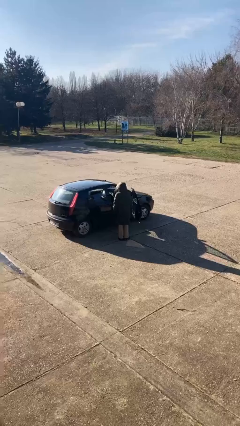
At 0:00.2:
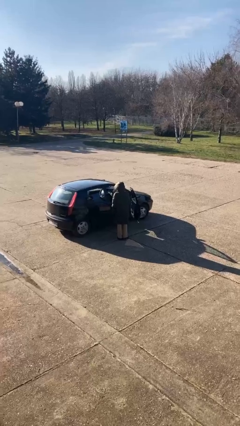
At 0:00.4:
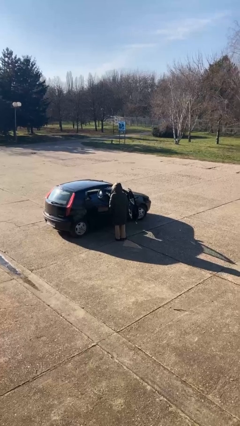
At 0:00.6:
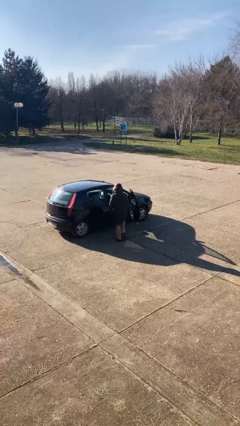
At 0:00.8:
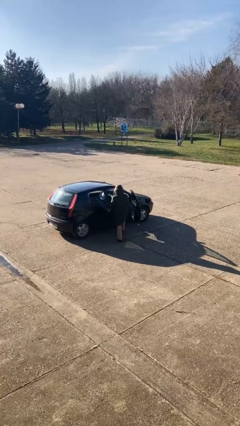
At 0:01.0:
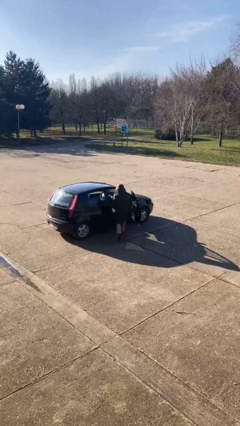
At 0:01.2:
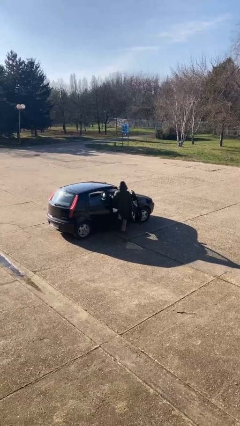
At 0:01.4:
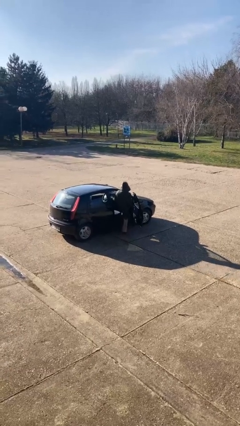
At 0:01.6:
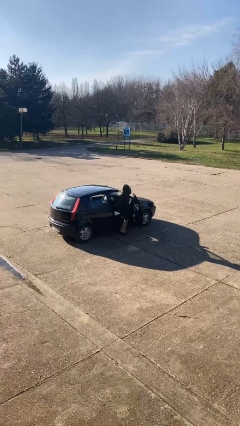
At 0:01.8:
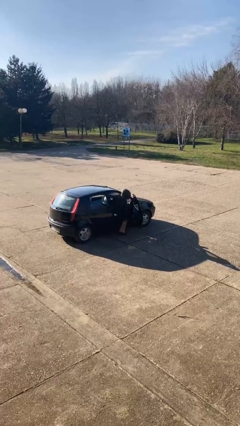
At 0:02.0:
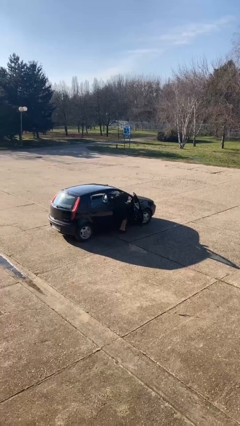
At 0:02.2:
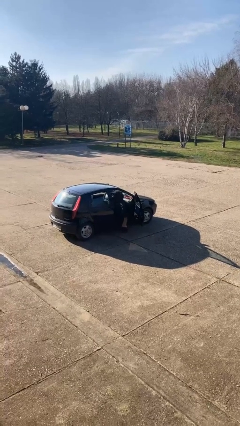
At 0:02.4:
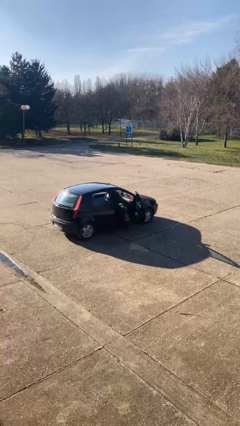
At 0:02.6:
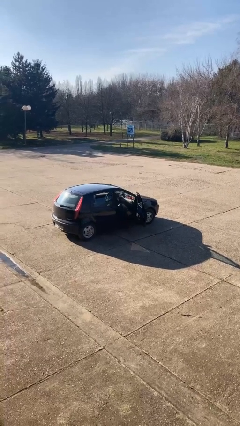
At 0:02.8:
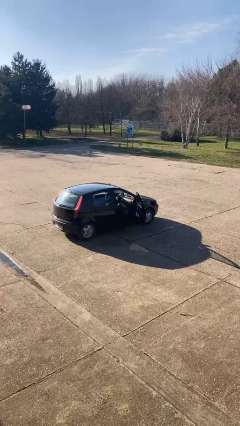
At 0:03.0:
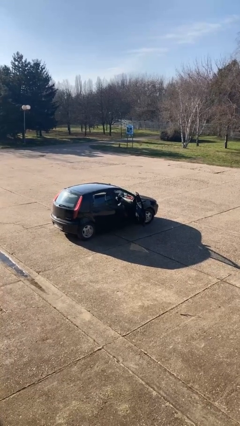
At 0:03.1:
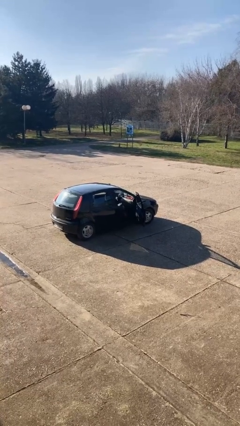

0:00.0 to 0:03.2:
person enters car

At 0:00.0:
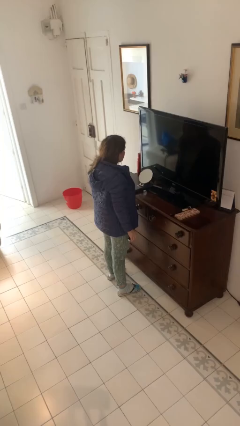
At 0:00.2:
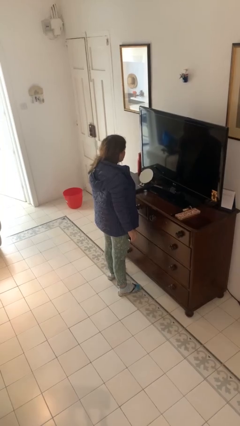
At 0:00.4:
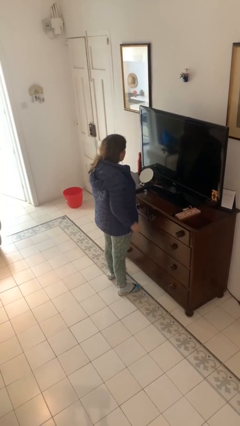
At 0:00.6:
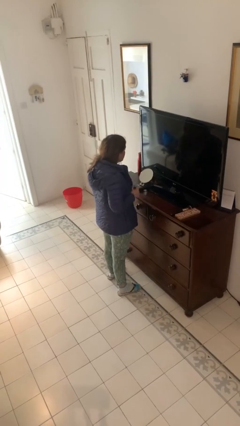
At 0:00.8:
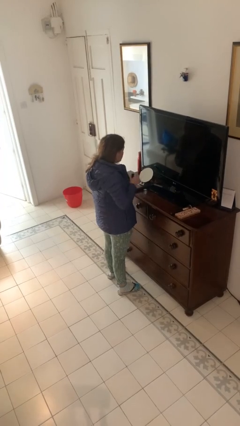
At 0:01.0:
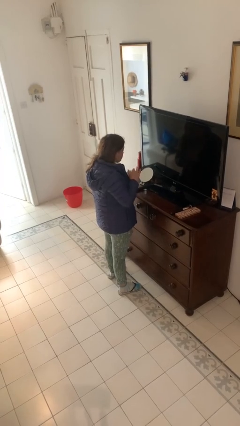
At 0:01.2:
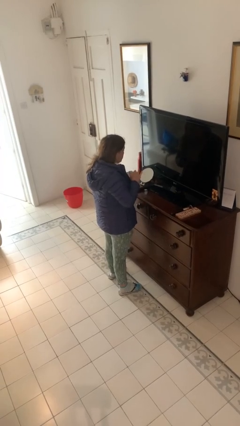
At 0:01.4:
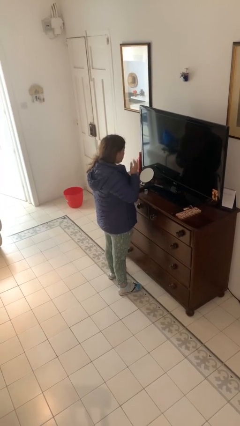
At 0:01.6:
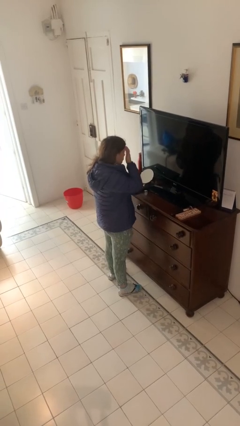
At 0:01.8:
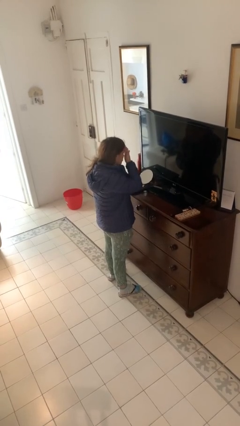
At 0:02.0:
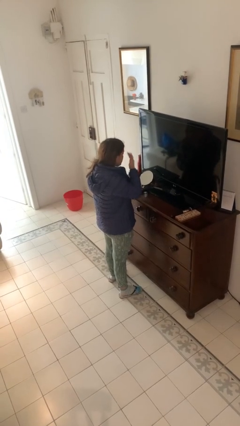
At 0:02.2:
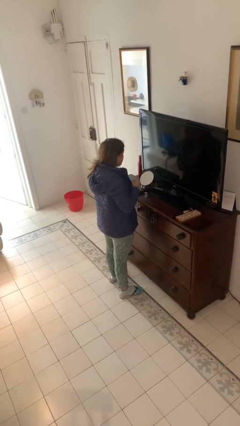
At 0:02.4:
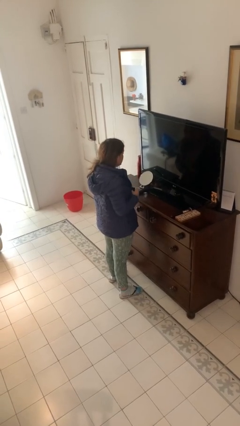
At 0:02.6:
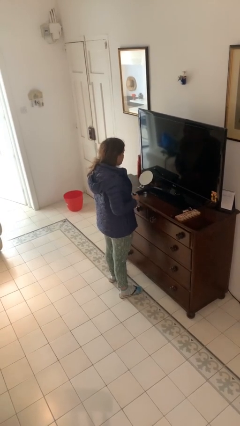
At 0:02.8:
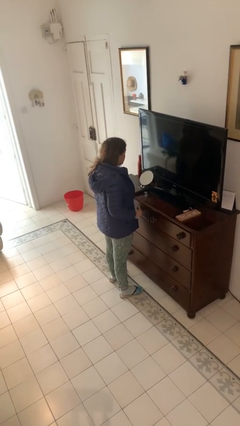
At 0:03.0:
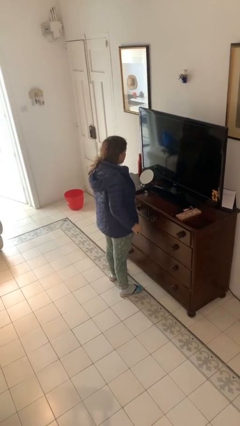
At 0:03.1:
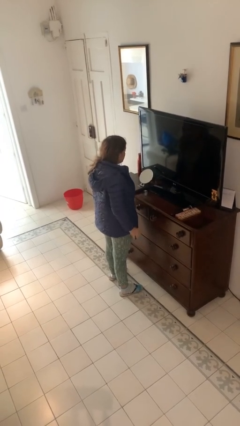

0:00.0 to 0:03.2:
person applies foundation makeup

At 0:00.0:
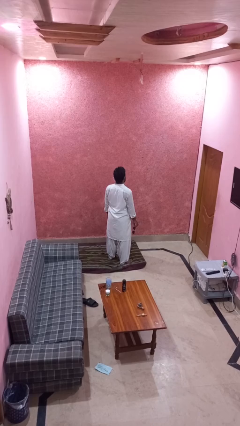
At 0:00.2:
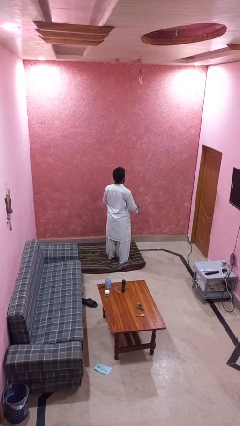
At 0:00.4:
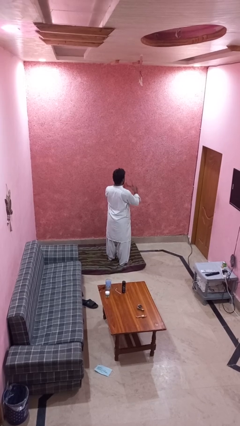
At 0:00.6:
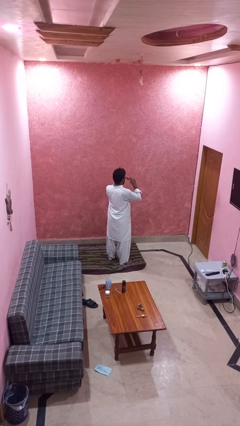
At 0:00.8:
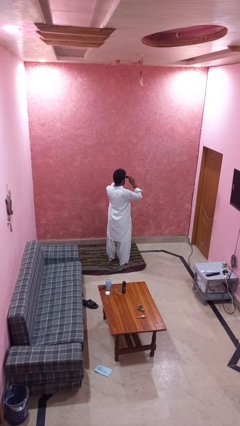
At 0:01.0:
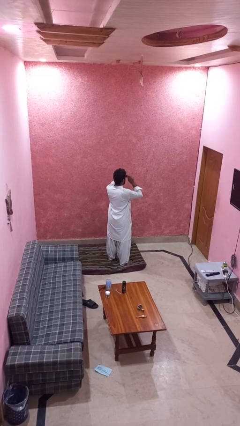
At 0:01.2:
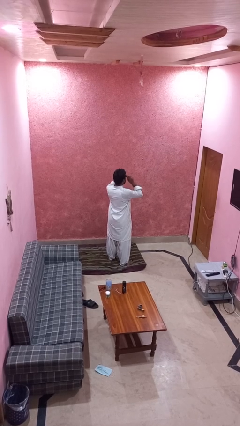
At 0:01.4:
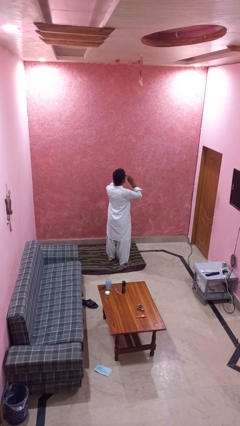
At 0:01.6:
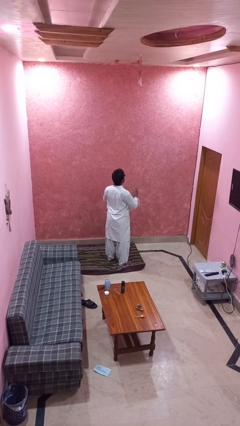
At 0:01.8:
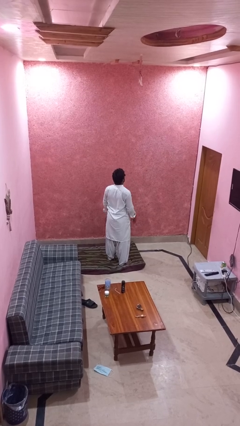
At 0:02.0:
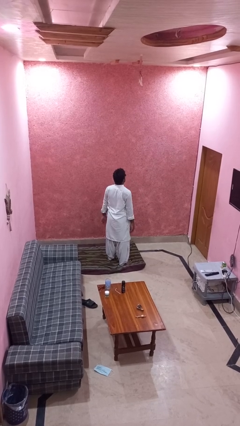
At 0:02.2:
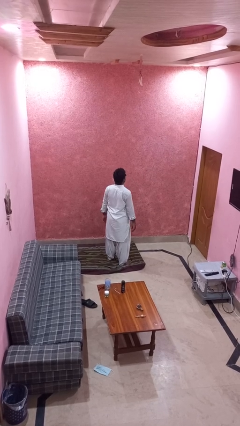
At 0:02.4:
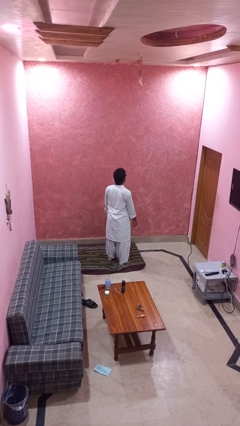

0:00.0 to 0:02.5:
person puts on sunglasses

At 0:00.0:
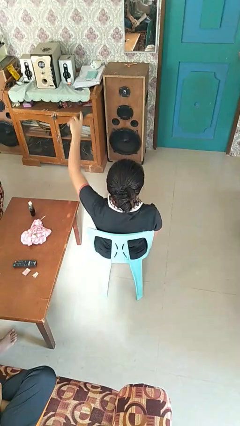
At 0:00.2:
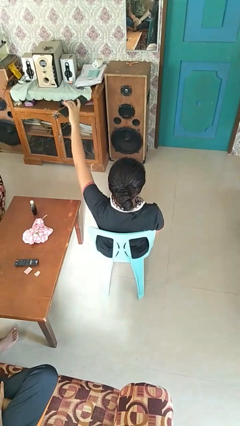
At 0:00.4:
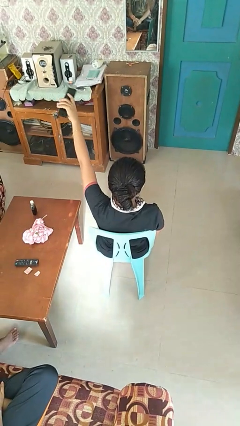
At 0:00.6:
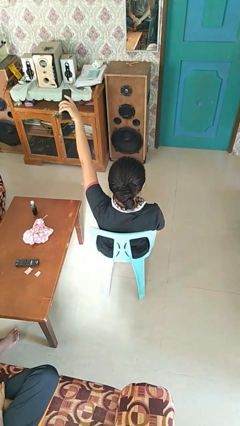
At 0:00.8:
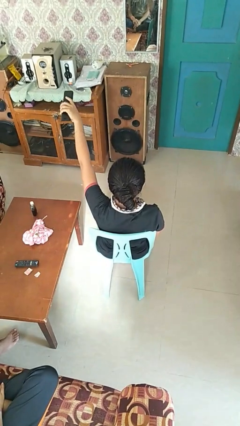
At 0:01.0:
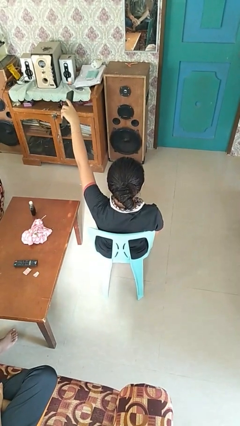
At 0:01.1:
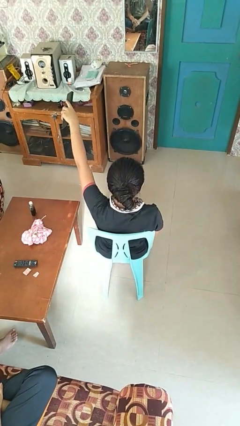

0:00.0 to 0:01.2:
person uses television remote

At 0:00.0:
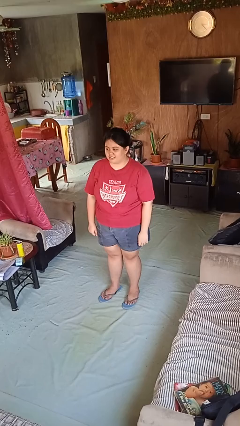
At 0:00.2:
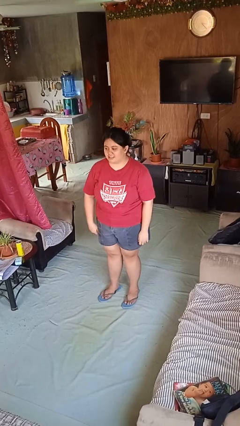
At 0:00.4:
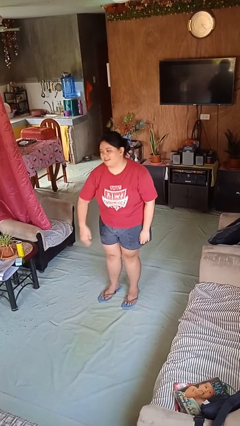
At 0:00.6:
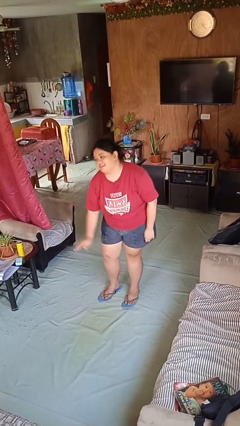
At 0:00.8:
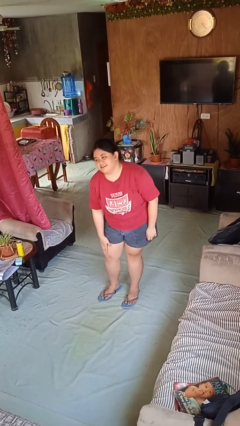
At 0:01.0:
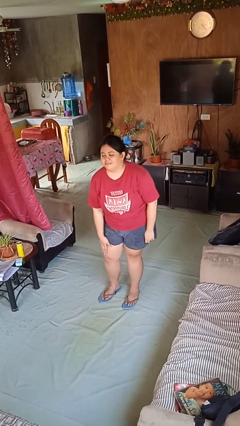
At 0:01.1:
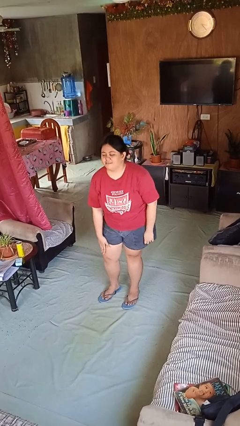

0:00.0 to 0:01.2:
person swats bug

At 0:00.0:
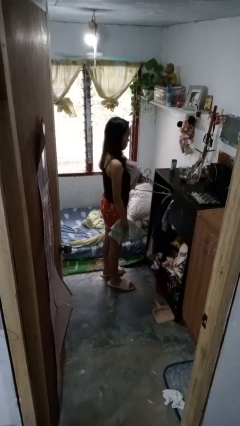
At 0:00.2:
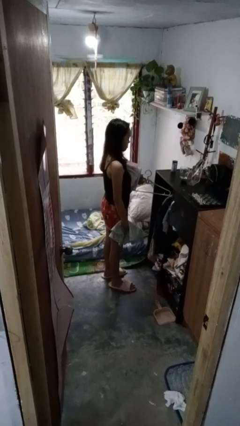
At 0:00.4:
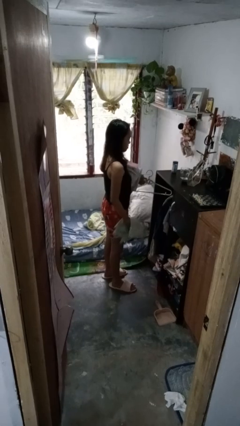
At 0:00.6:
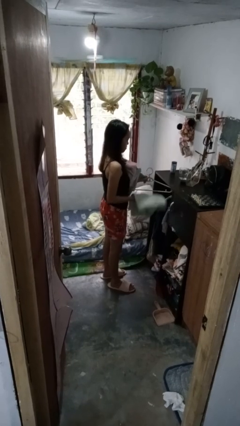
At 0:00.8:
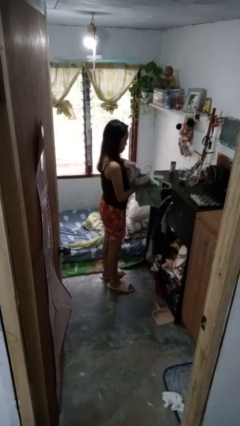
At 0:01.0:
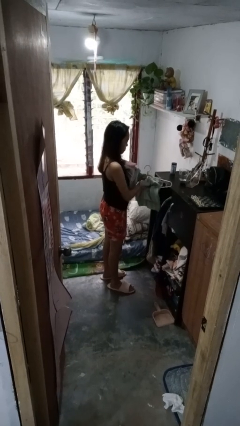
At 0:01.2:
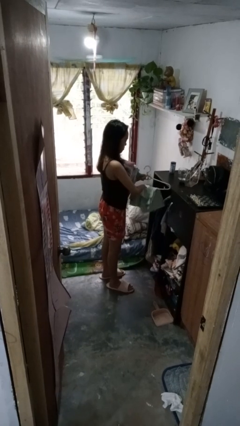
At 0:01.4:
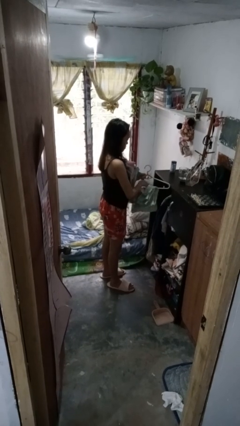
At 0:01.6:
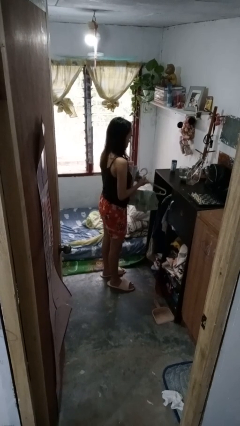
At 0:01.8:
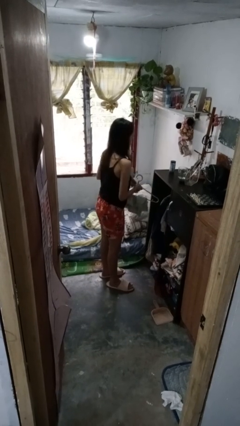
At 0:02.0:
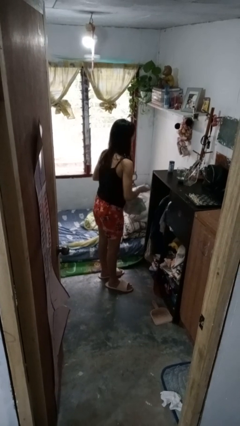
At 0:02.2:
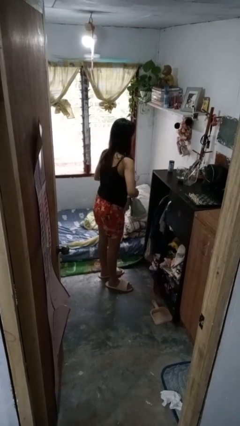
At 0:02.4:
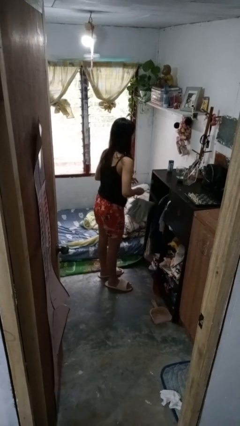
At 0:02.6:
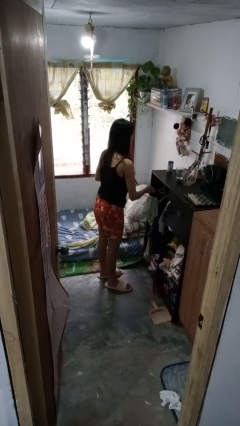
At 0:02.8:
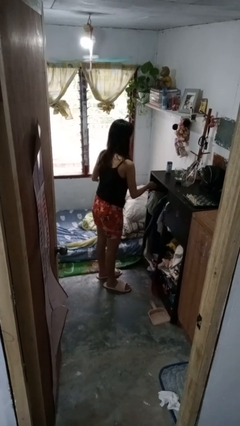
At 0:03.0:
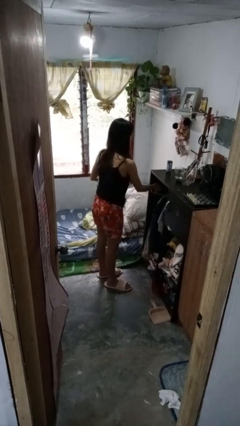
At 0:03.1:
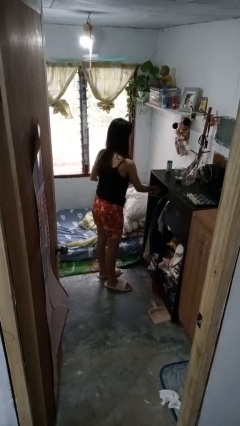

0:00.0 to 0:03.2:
person puts clothes into closet

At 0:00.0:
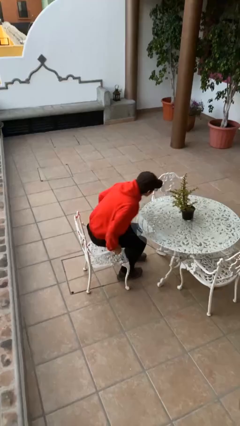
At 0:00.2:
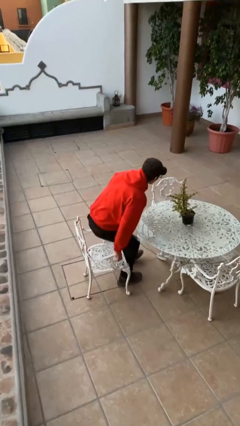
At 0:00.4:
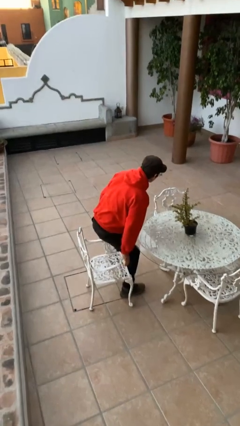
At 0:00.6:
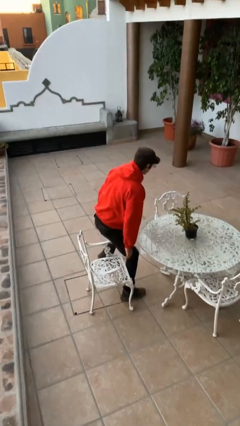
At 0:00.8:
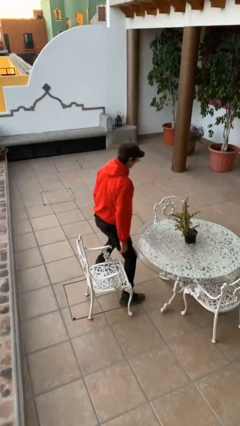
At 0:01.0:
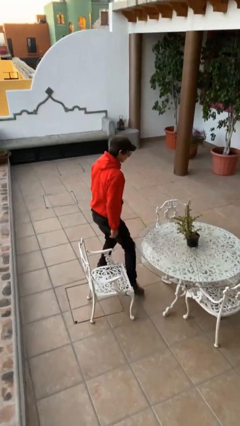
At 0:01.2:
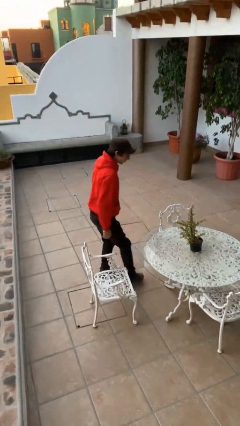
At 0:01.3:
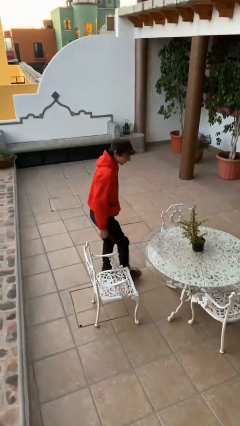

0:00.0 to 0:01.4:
person stands up

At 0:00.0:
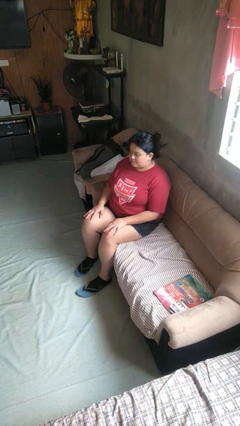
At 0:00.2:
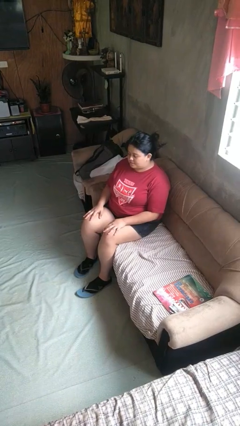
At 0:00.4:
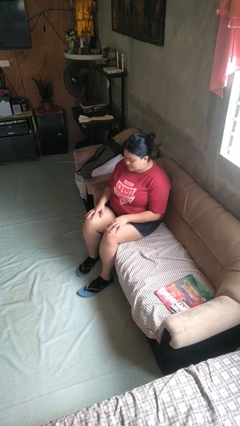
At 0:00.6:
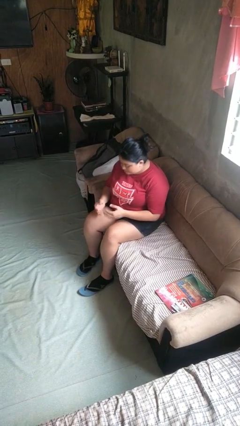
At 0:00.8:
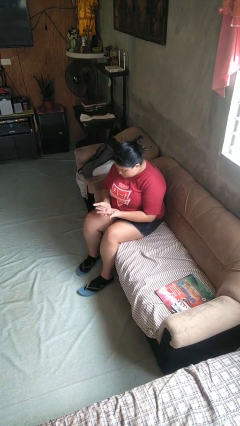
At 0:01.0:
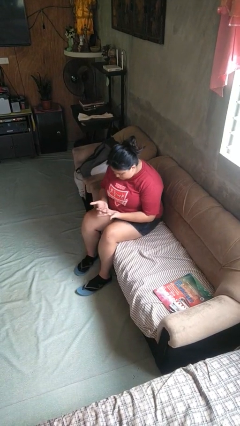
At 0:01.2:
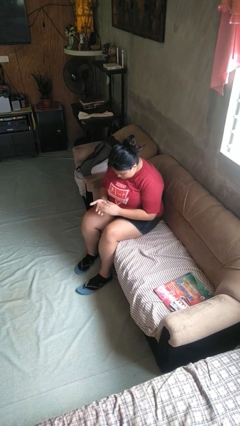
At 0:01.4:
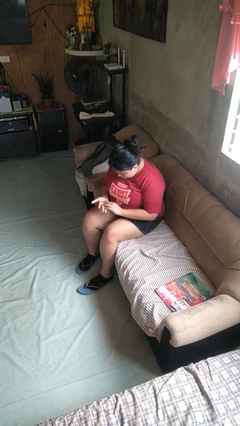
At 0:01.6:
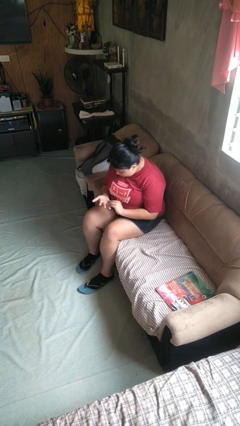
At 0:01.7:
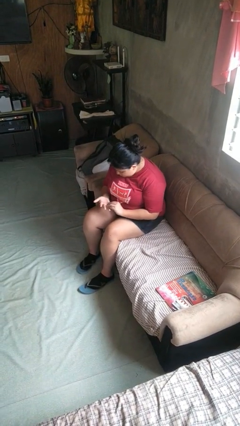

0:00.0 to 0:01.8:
person looks at hands in lap
